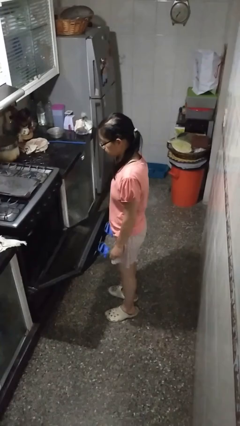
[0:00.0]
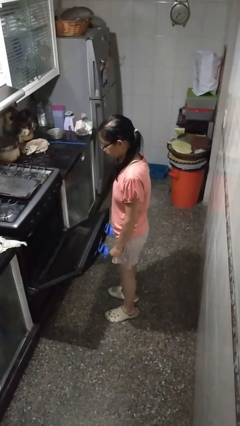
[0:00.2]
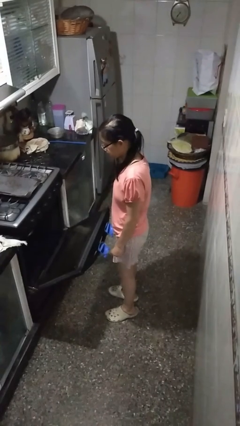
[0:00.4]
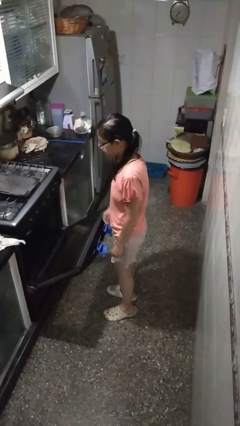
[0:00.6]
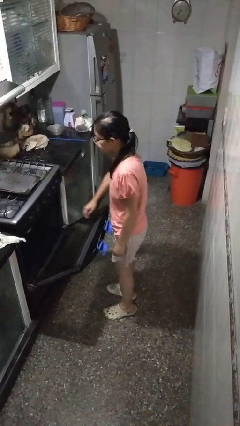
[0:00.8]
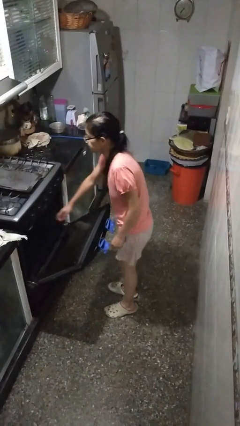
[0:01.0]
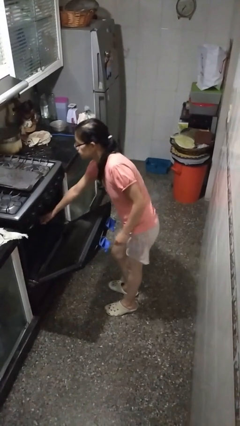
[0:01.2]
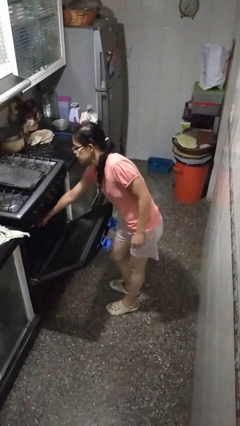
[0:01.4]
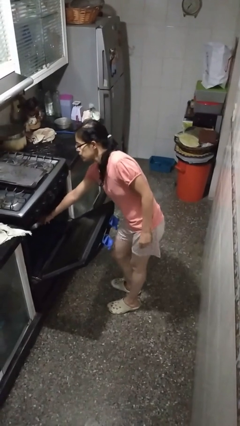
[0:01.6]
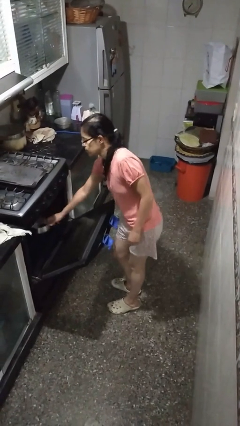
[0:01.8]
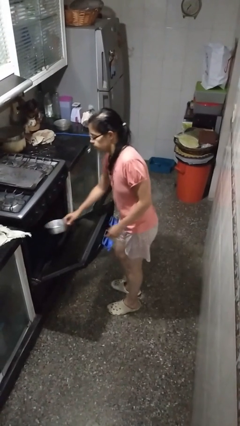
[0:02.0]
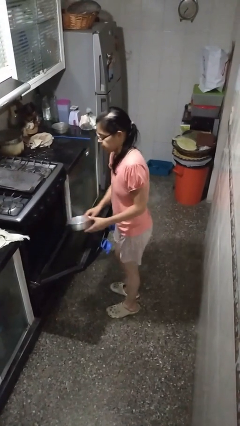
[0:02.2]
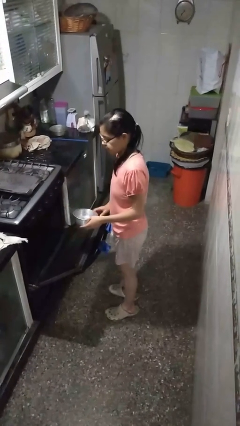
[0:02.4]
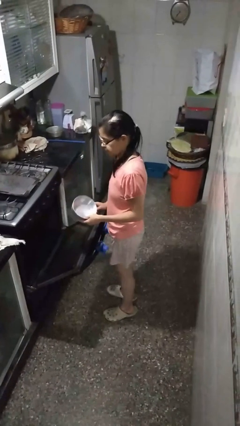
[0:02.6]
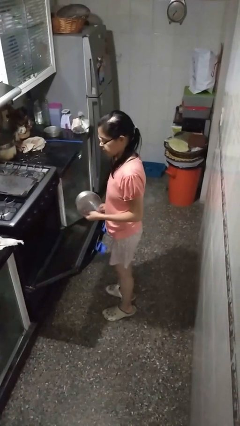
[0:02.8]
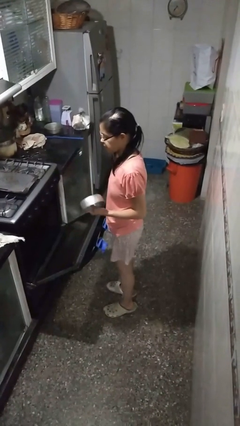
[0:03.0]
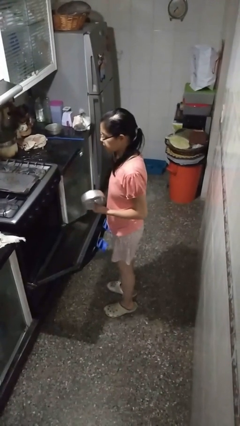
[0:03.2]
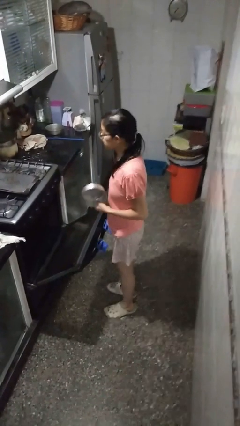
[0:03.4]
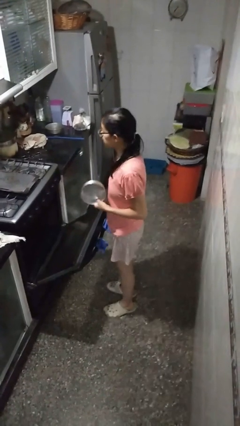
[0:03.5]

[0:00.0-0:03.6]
person takes object from oven

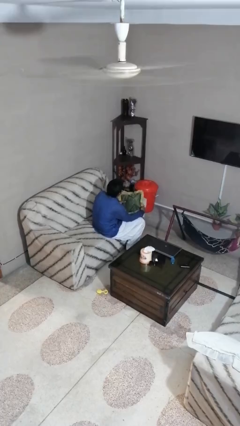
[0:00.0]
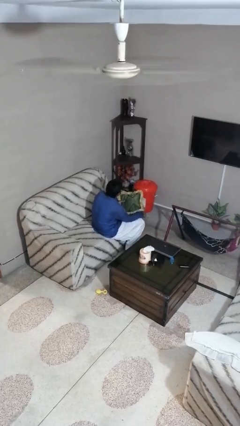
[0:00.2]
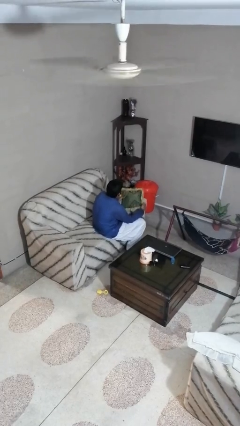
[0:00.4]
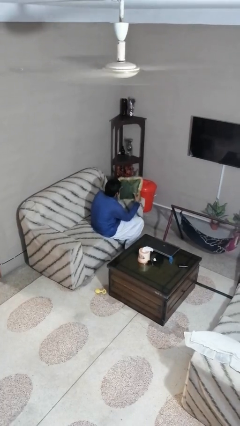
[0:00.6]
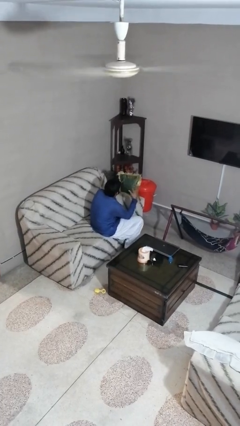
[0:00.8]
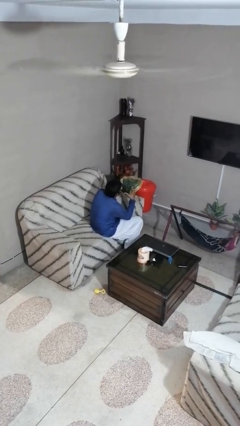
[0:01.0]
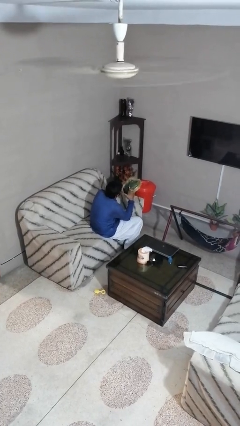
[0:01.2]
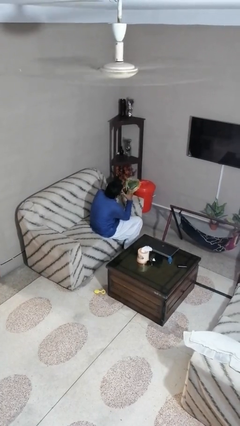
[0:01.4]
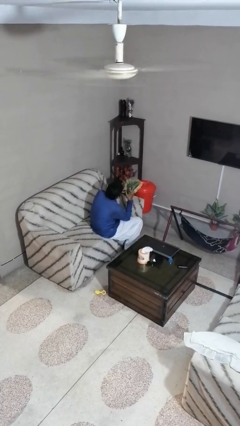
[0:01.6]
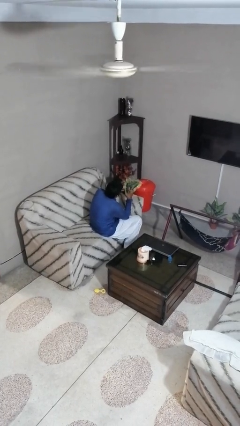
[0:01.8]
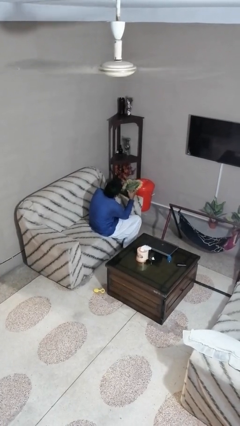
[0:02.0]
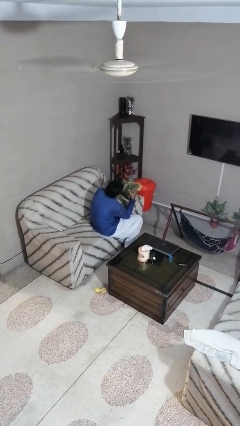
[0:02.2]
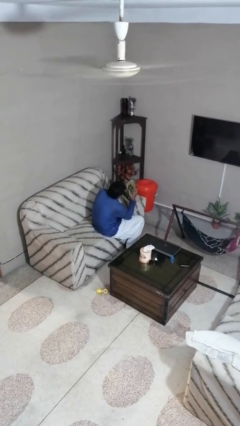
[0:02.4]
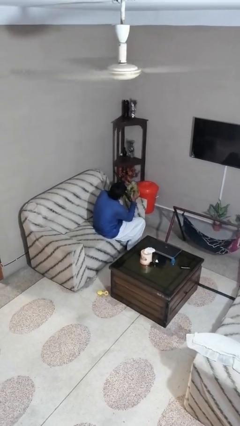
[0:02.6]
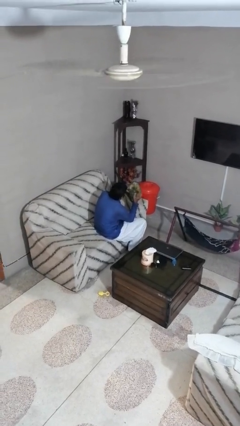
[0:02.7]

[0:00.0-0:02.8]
person squeezes object

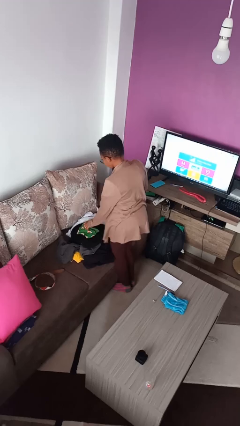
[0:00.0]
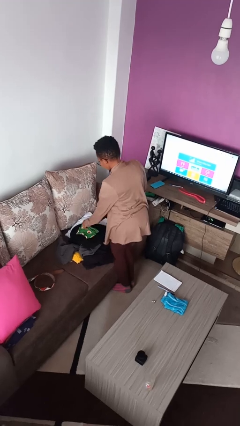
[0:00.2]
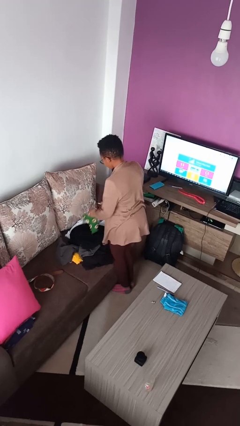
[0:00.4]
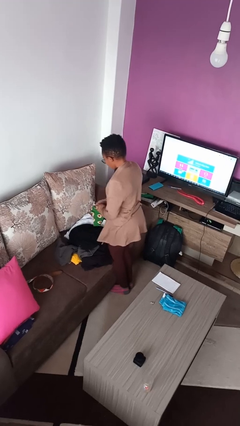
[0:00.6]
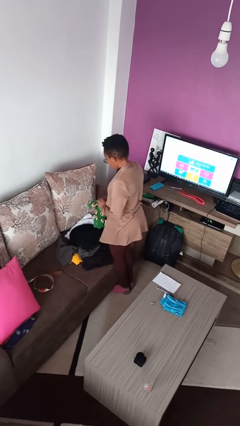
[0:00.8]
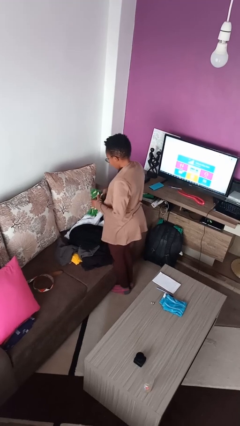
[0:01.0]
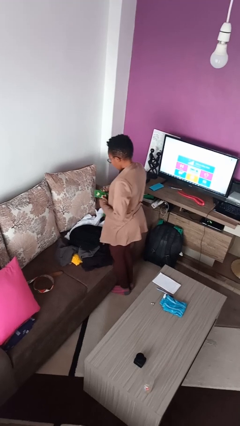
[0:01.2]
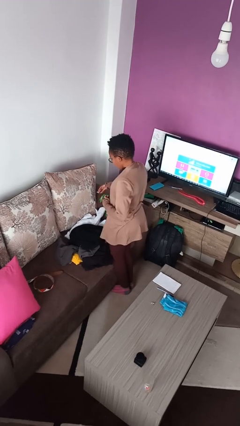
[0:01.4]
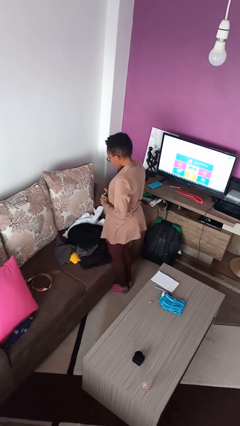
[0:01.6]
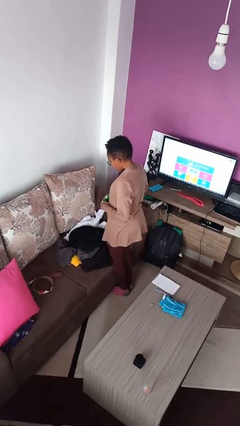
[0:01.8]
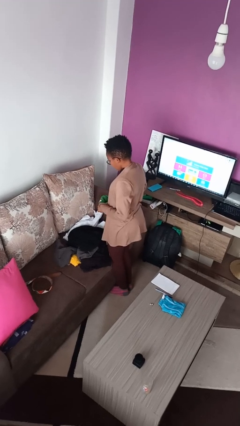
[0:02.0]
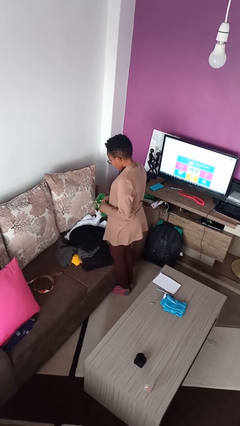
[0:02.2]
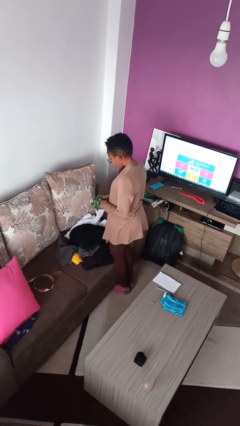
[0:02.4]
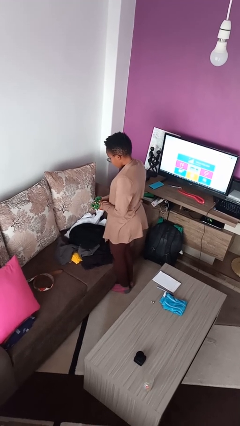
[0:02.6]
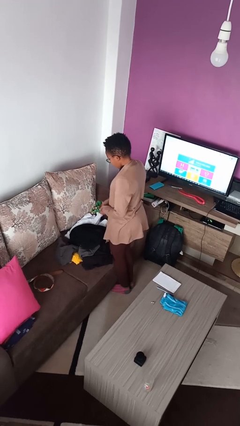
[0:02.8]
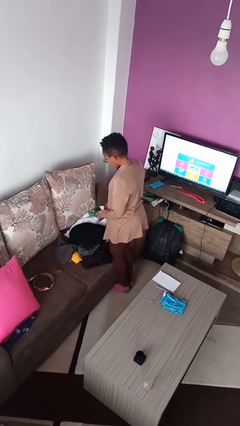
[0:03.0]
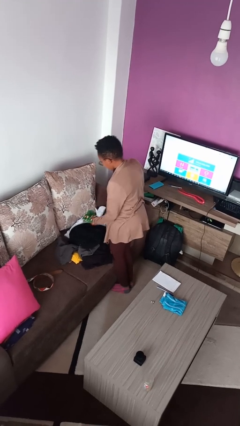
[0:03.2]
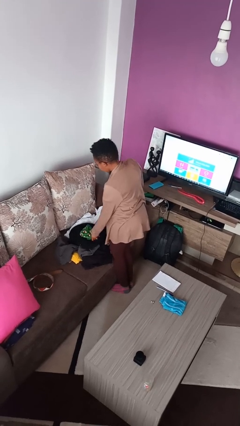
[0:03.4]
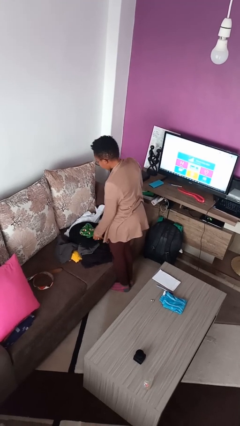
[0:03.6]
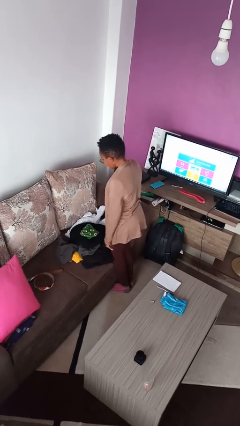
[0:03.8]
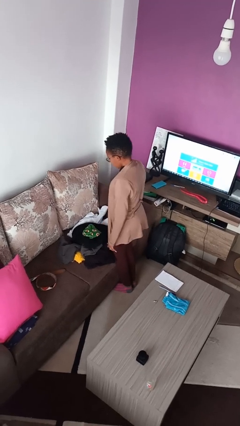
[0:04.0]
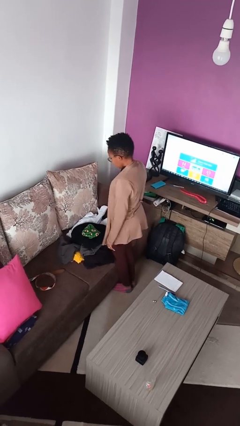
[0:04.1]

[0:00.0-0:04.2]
person folds socks

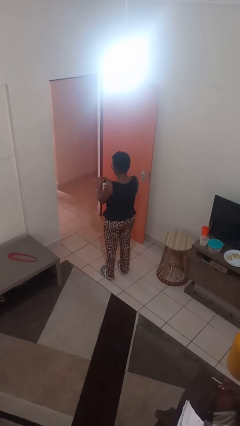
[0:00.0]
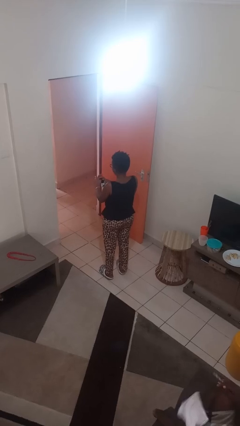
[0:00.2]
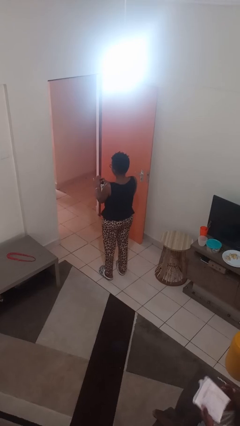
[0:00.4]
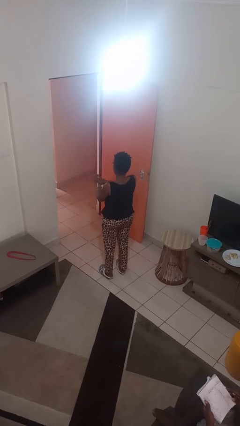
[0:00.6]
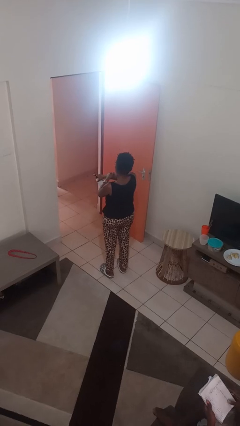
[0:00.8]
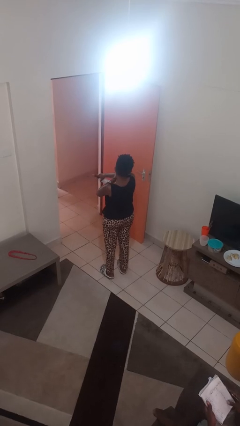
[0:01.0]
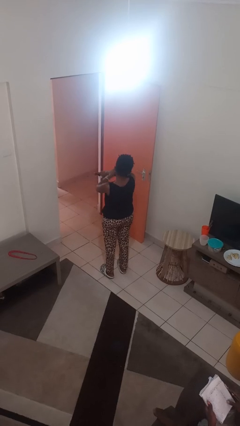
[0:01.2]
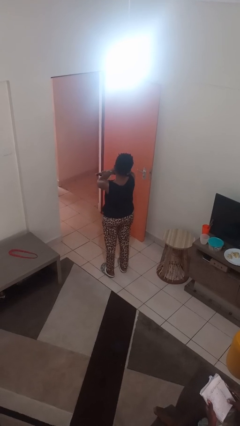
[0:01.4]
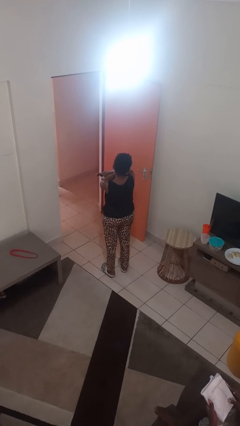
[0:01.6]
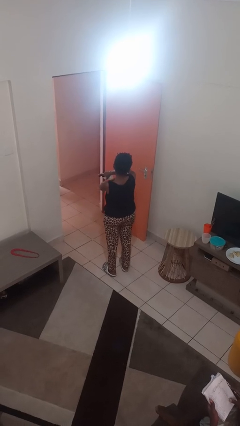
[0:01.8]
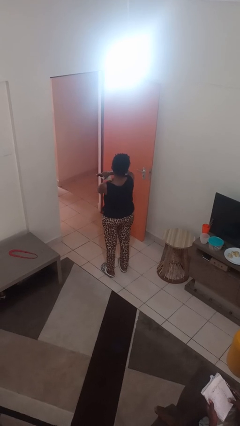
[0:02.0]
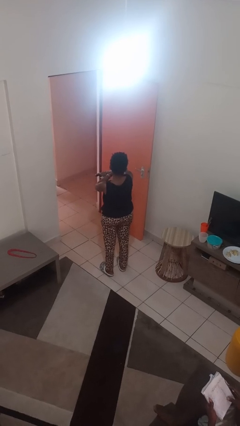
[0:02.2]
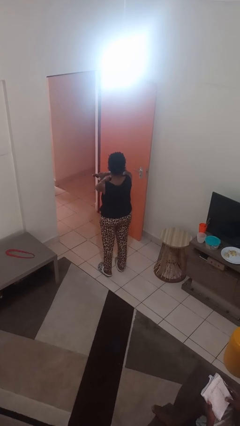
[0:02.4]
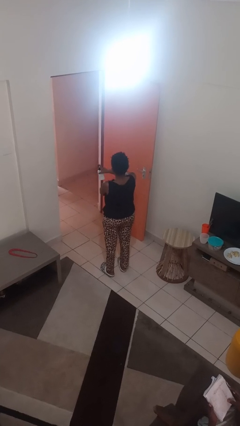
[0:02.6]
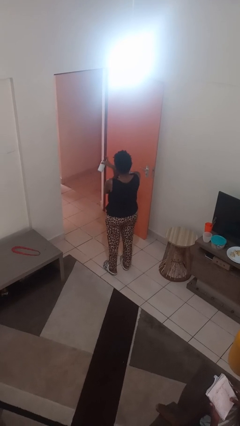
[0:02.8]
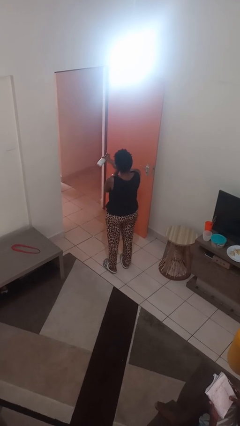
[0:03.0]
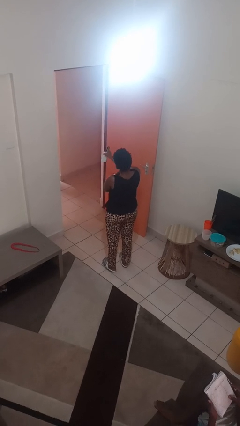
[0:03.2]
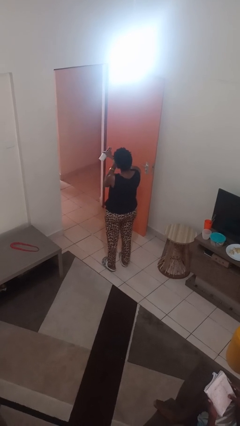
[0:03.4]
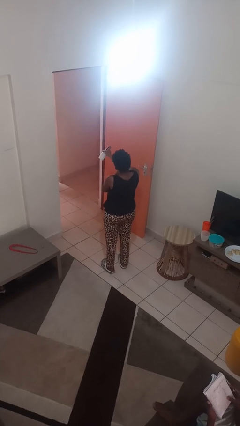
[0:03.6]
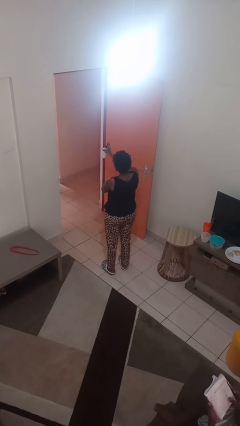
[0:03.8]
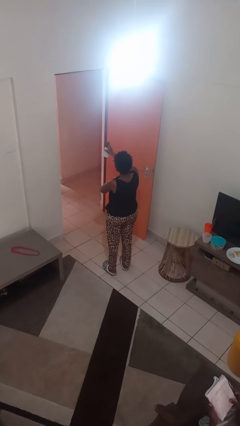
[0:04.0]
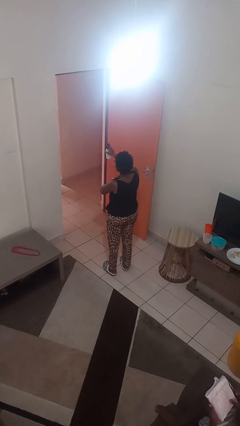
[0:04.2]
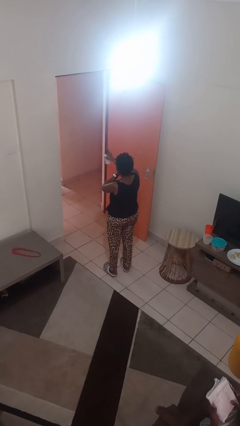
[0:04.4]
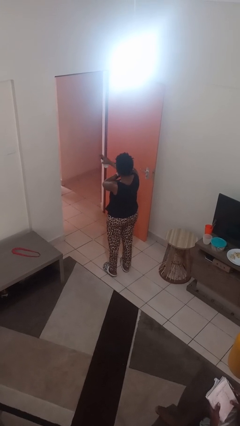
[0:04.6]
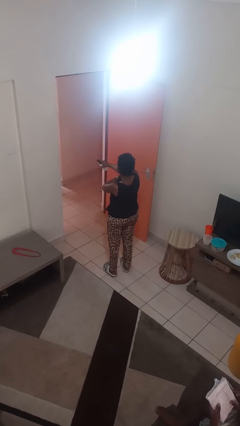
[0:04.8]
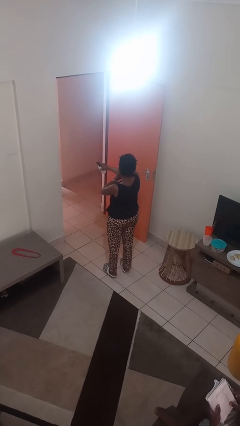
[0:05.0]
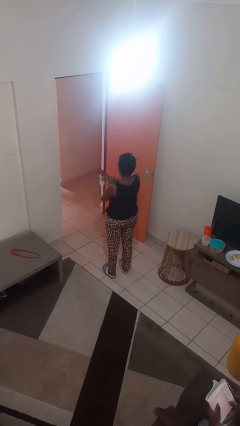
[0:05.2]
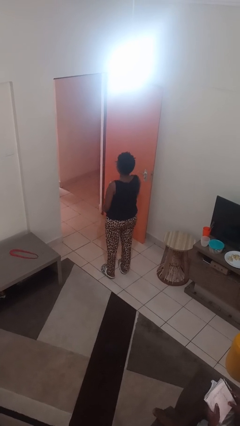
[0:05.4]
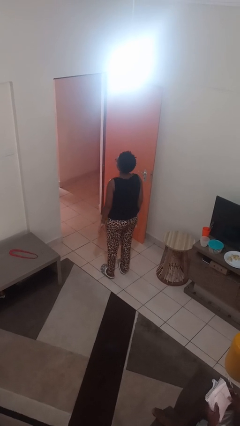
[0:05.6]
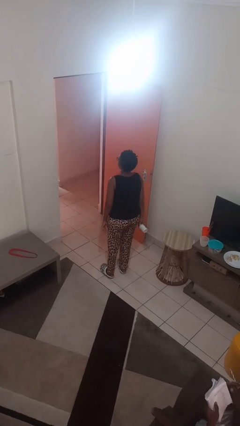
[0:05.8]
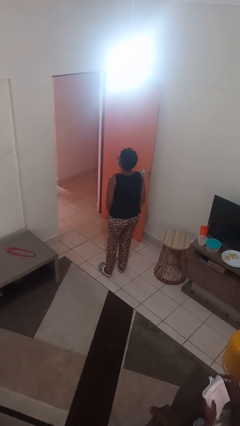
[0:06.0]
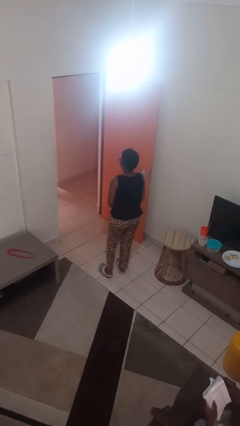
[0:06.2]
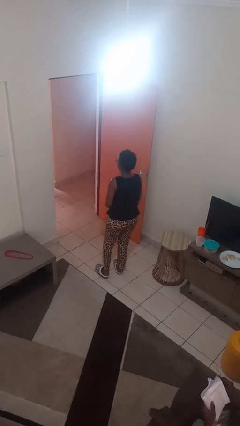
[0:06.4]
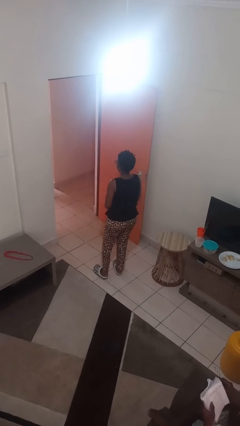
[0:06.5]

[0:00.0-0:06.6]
person applies sunscreen

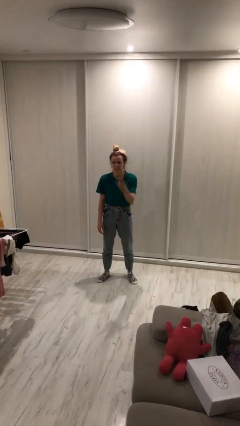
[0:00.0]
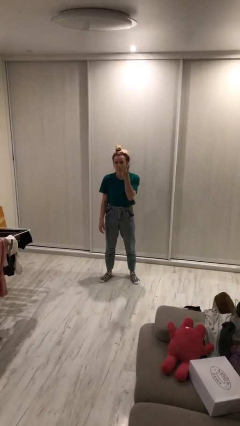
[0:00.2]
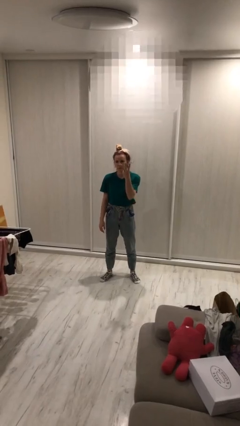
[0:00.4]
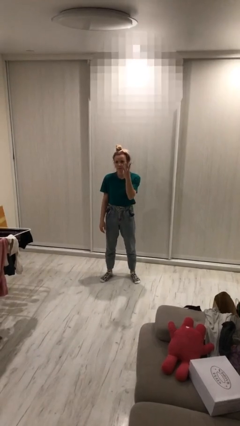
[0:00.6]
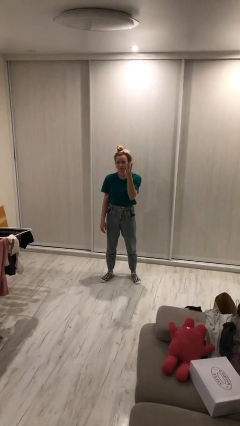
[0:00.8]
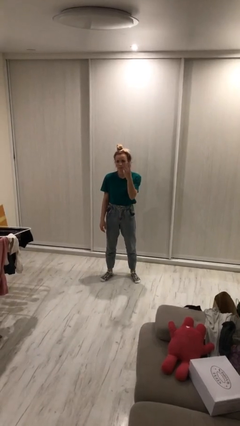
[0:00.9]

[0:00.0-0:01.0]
person gestures number three
